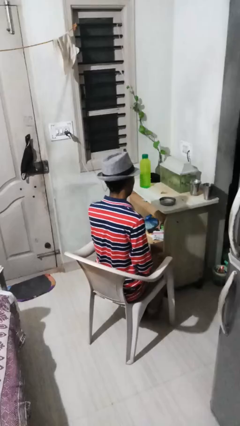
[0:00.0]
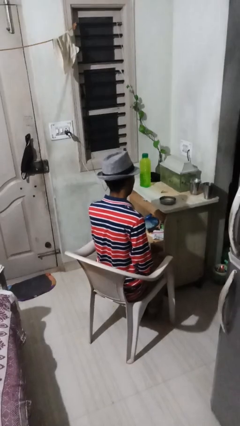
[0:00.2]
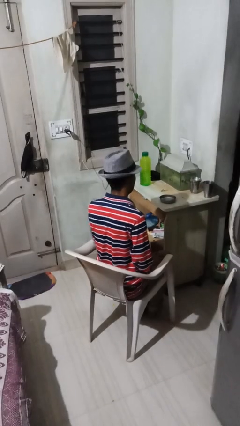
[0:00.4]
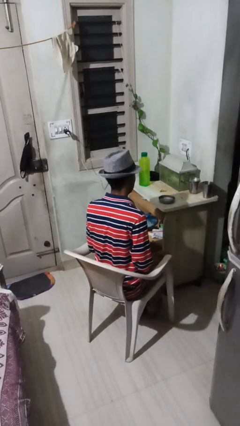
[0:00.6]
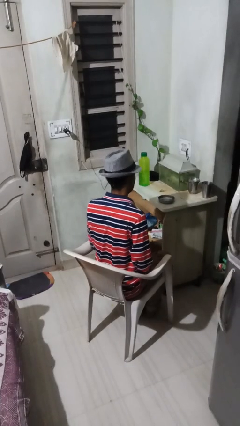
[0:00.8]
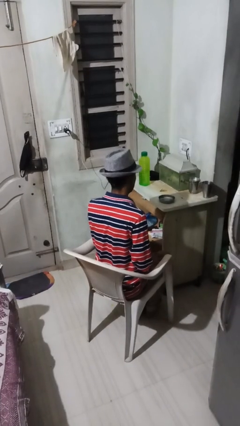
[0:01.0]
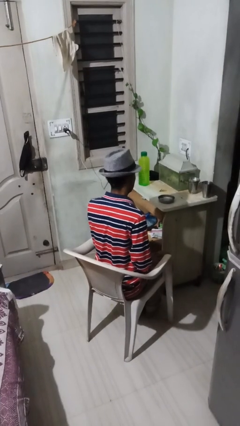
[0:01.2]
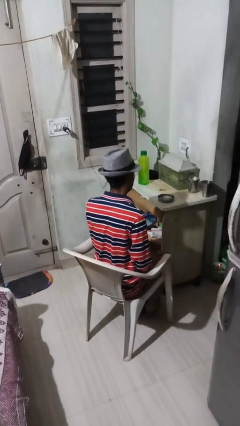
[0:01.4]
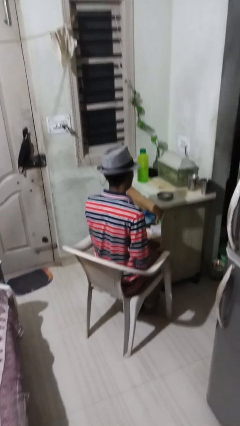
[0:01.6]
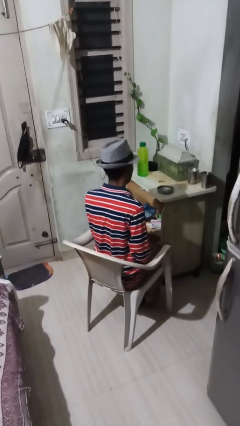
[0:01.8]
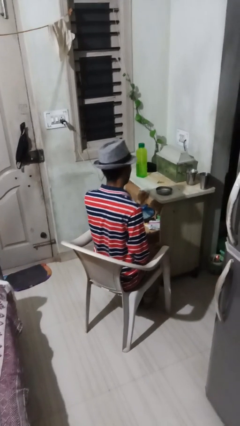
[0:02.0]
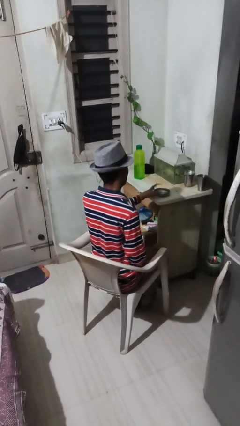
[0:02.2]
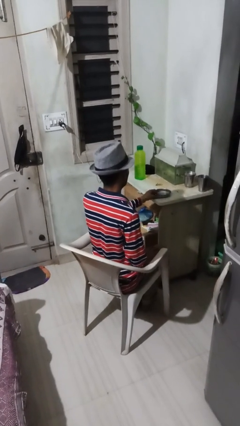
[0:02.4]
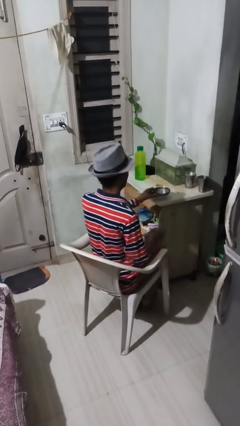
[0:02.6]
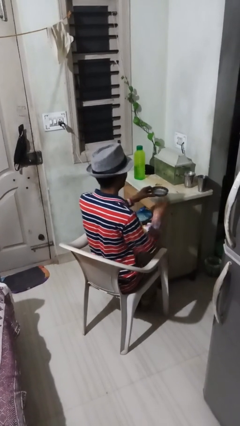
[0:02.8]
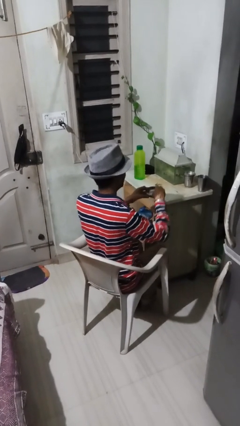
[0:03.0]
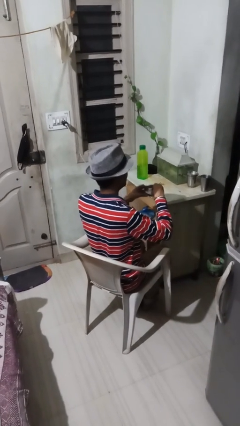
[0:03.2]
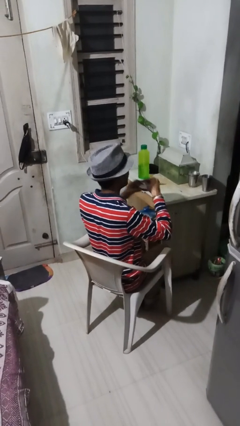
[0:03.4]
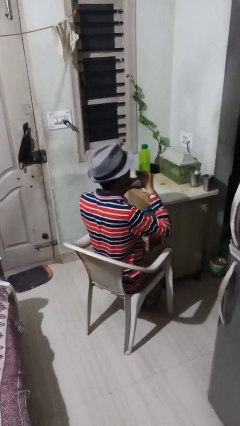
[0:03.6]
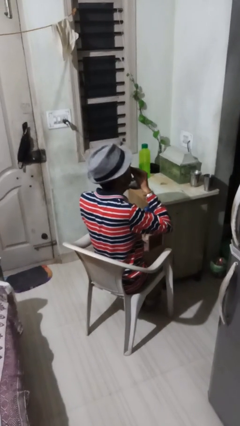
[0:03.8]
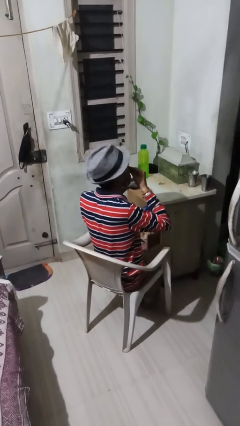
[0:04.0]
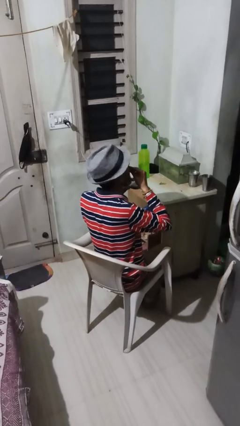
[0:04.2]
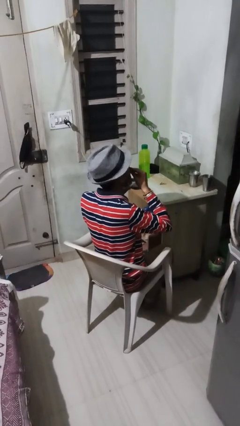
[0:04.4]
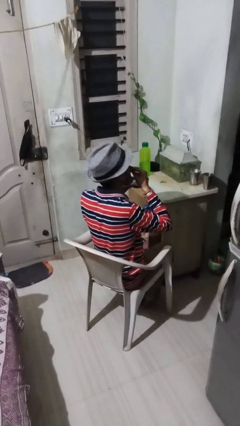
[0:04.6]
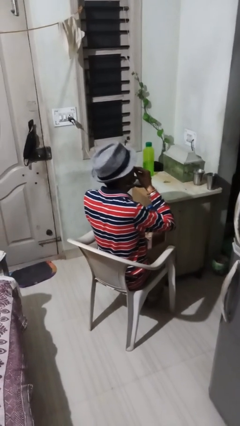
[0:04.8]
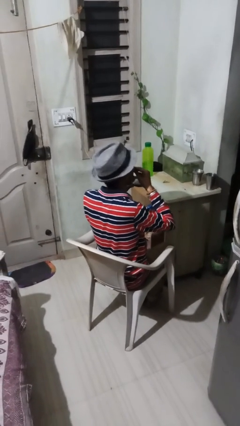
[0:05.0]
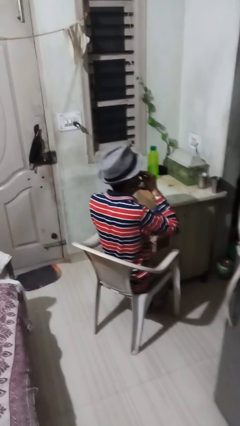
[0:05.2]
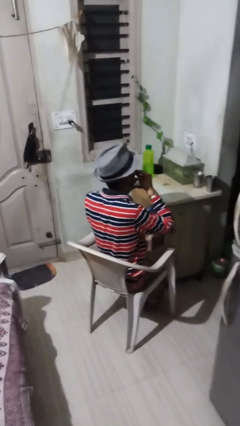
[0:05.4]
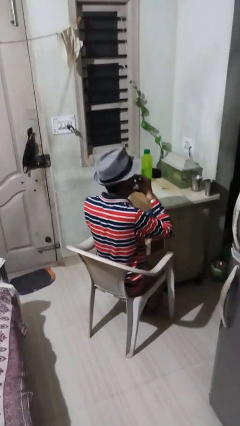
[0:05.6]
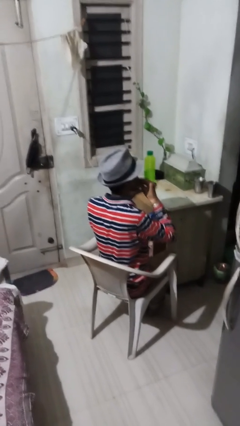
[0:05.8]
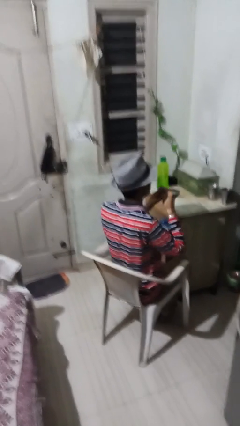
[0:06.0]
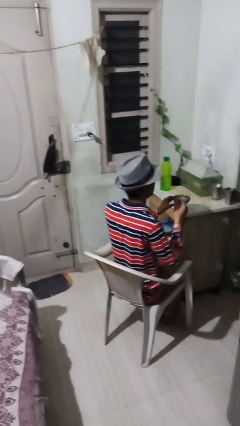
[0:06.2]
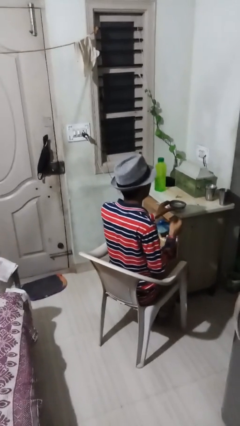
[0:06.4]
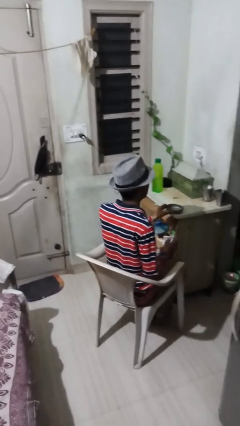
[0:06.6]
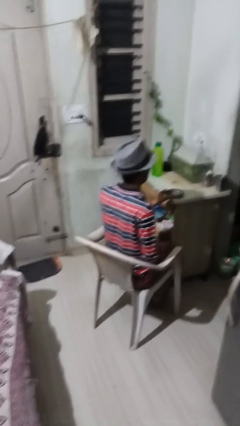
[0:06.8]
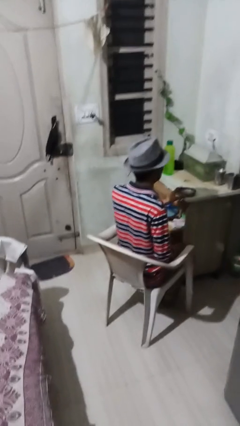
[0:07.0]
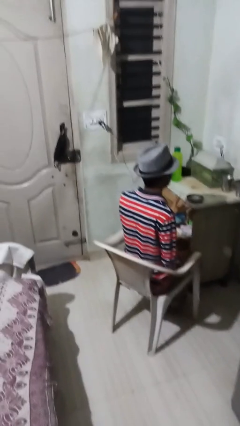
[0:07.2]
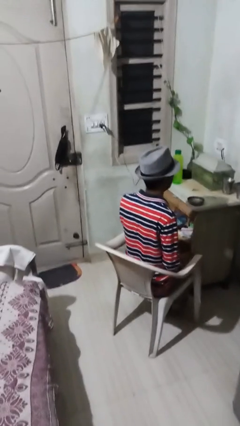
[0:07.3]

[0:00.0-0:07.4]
person eats with hands

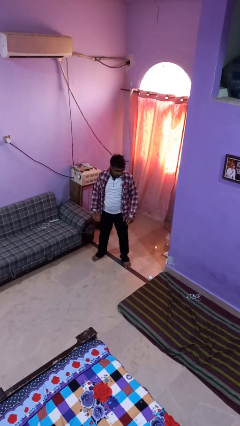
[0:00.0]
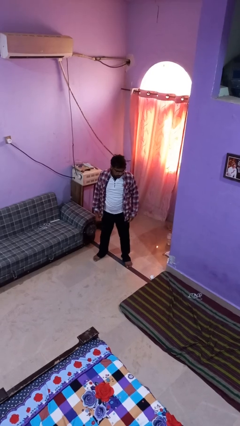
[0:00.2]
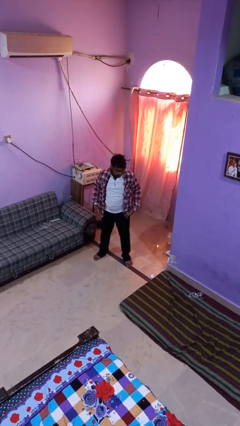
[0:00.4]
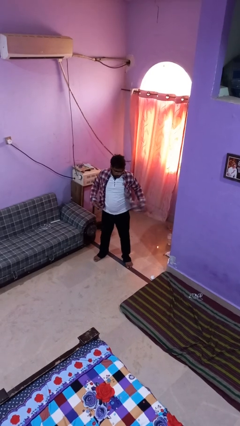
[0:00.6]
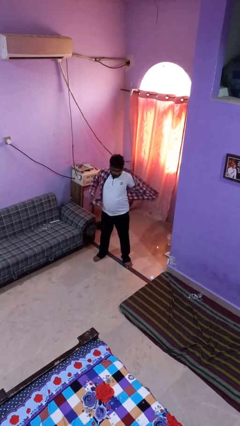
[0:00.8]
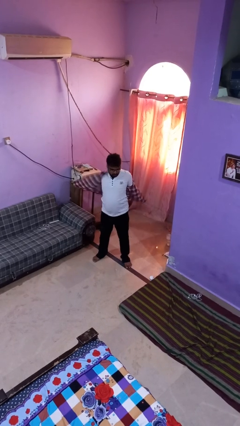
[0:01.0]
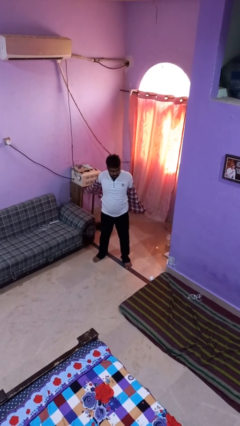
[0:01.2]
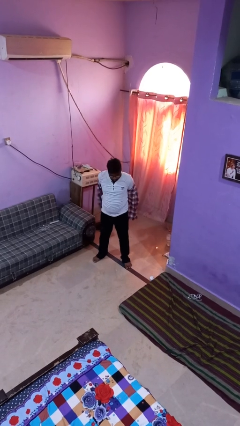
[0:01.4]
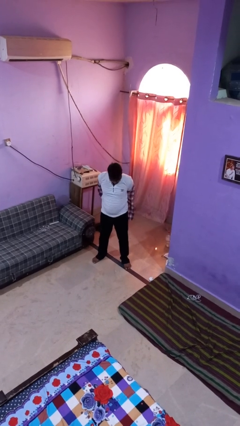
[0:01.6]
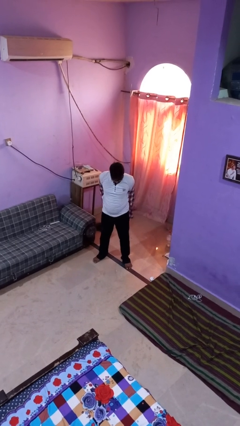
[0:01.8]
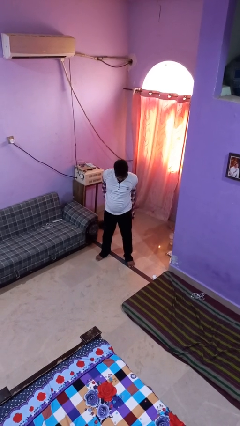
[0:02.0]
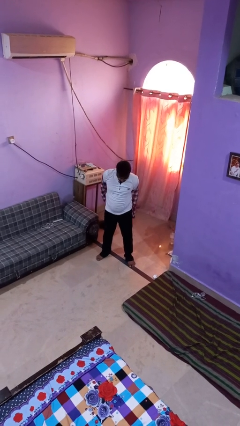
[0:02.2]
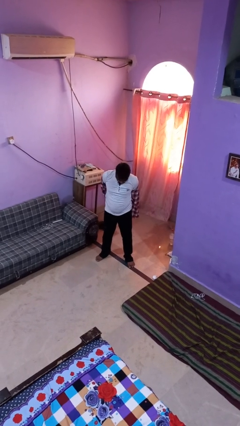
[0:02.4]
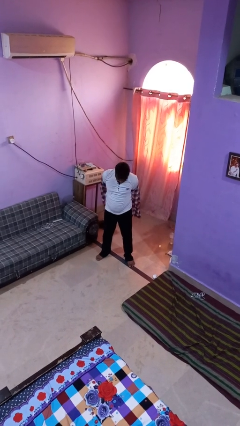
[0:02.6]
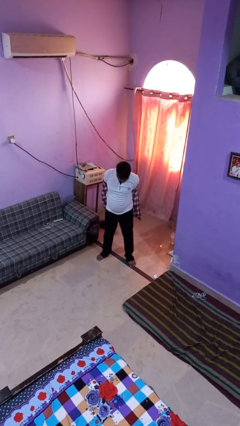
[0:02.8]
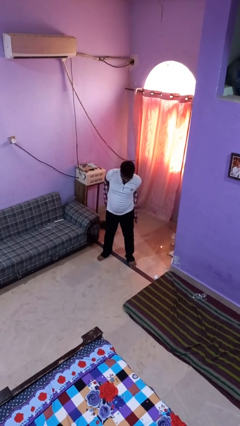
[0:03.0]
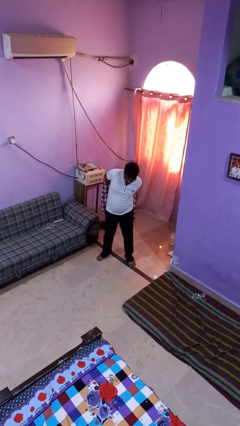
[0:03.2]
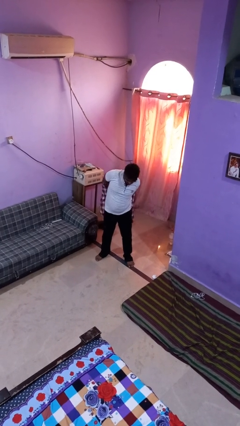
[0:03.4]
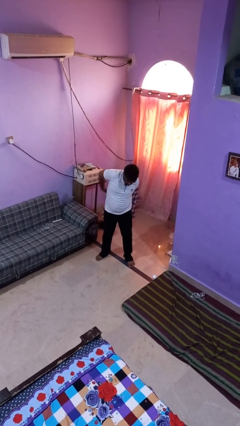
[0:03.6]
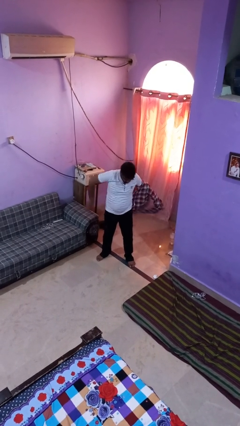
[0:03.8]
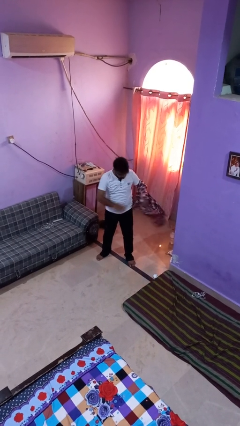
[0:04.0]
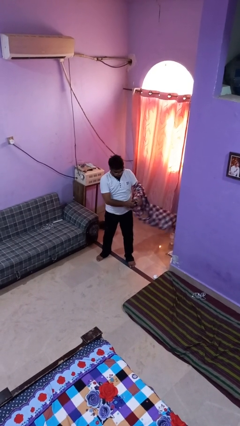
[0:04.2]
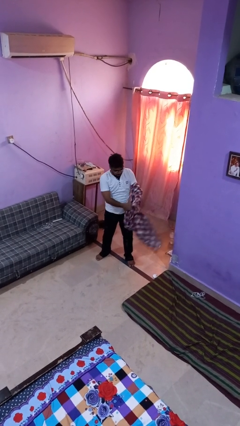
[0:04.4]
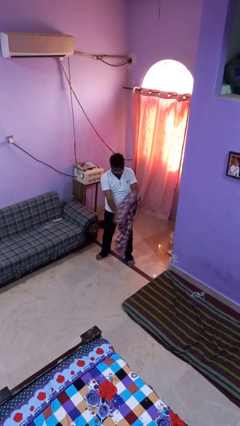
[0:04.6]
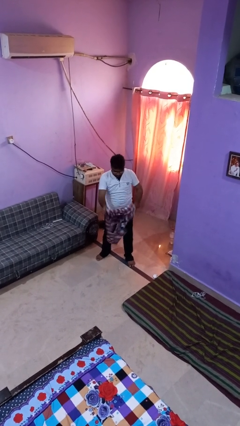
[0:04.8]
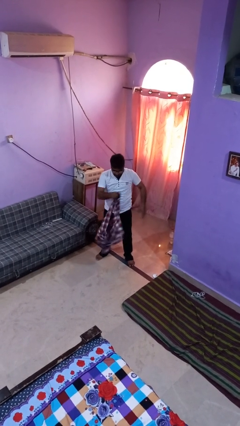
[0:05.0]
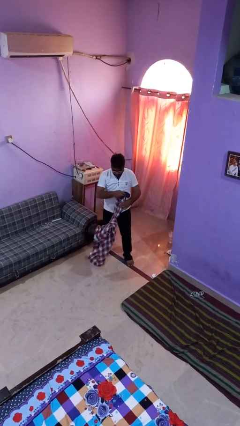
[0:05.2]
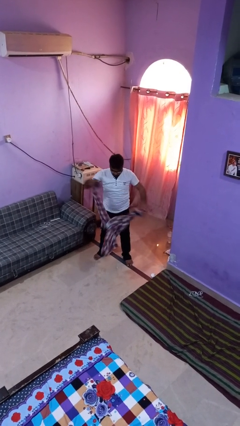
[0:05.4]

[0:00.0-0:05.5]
person takes off shirt

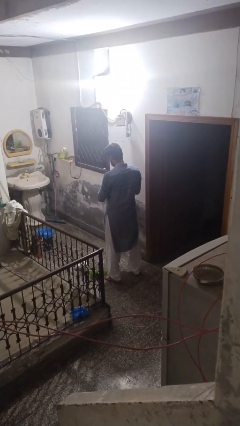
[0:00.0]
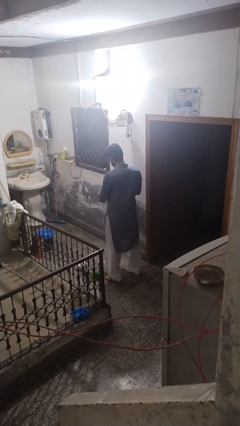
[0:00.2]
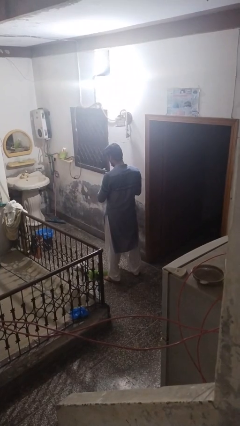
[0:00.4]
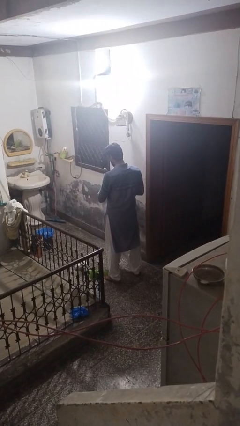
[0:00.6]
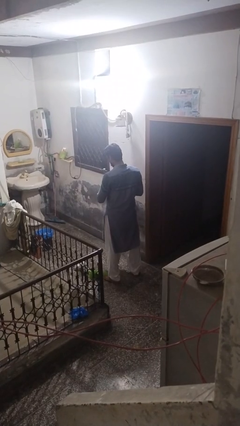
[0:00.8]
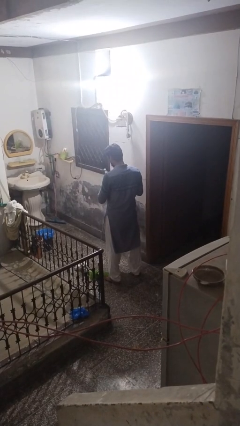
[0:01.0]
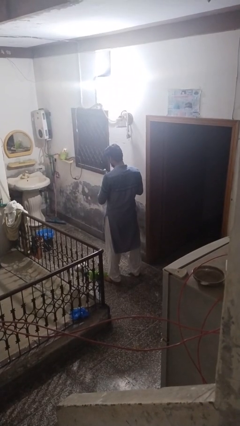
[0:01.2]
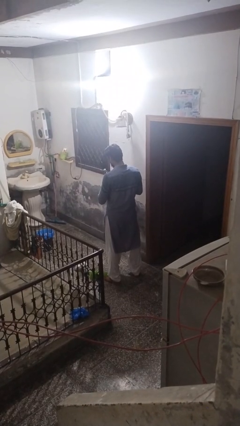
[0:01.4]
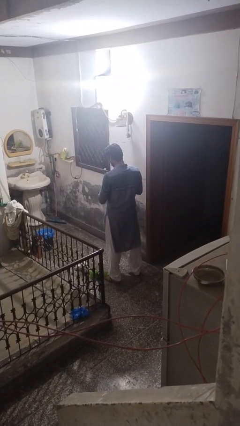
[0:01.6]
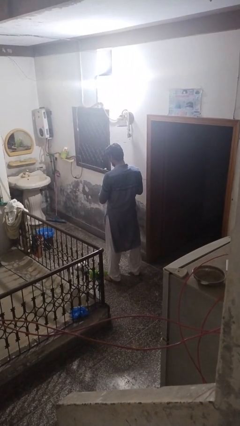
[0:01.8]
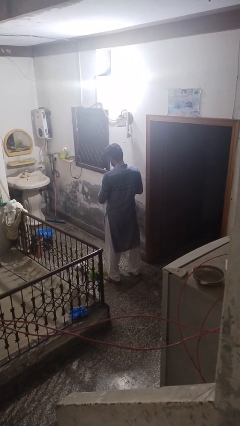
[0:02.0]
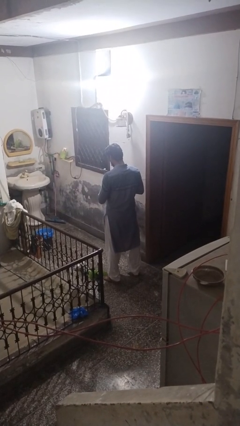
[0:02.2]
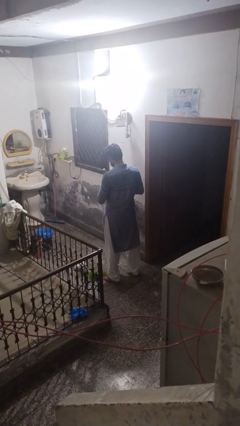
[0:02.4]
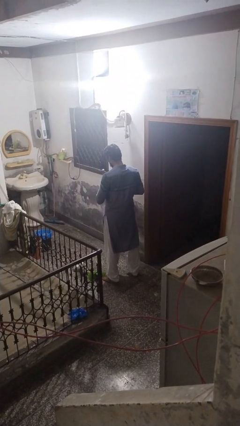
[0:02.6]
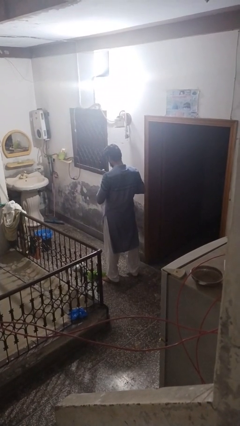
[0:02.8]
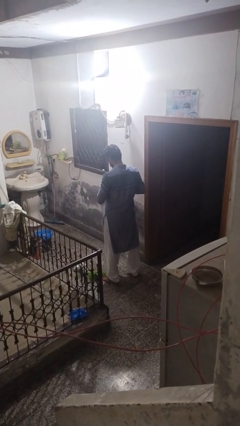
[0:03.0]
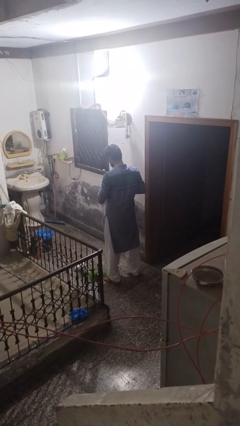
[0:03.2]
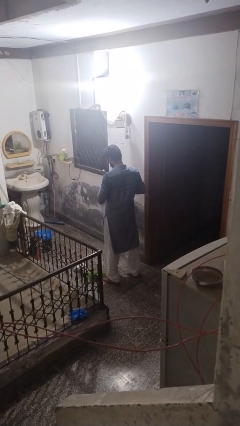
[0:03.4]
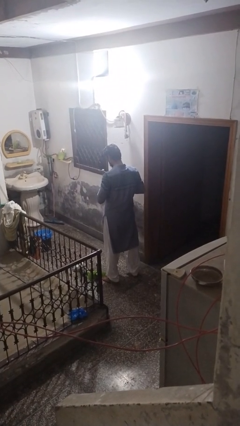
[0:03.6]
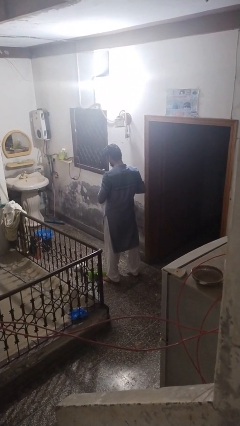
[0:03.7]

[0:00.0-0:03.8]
person takes off ring

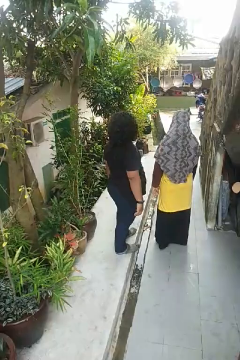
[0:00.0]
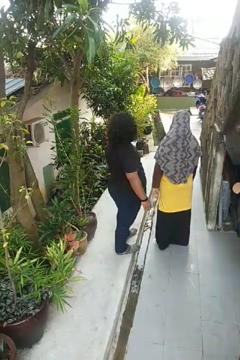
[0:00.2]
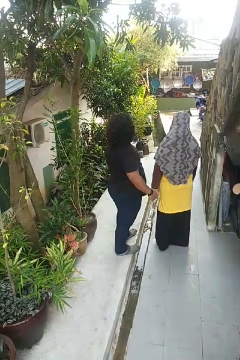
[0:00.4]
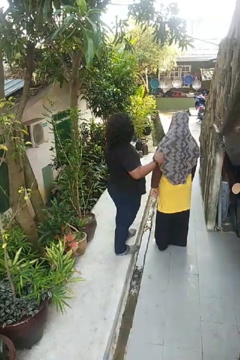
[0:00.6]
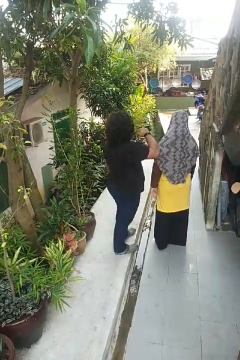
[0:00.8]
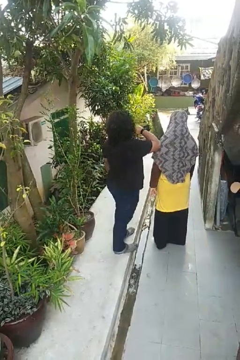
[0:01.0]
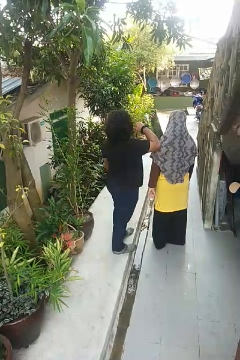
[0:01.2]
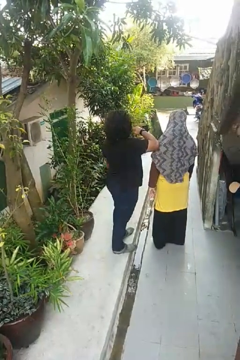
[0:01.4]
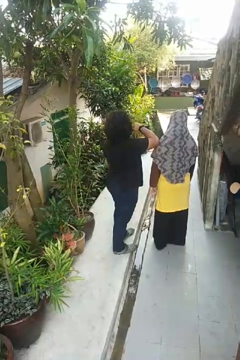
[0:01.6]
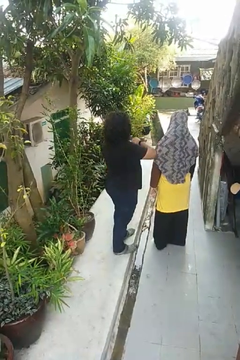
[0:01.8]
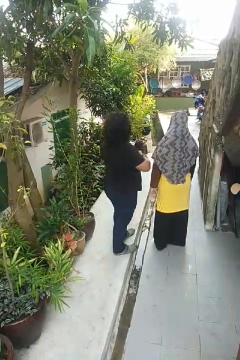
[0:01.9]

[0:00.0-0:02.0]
person nudges person with elbow
